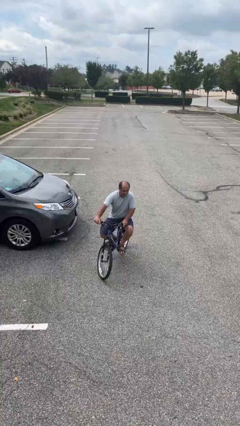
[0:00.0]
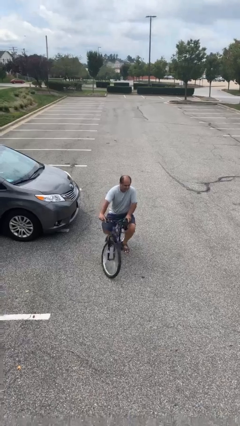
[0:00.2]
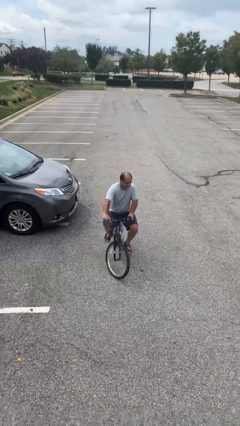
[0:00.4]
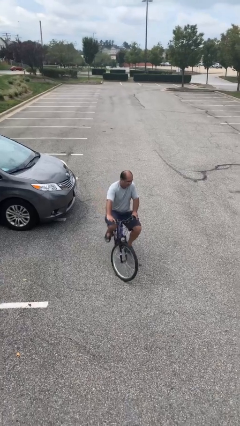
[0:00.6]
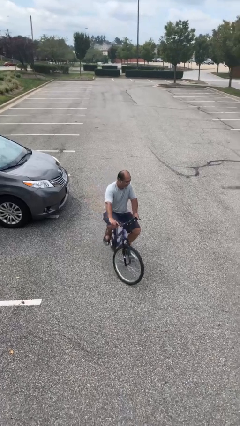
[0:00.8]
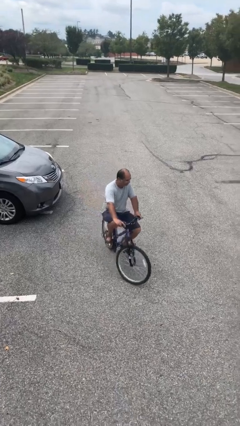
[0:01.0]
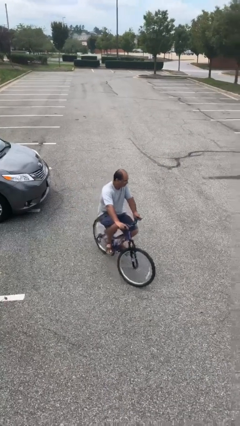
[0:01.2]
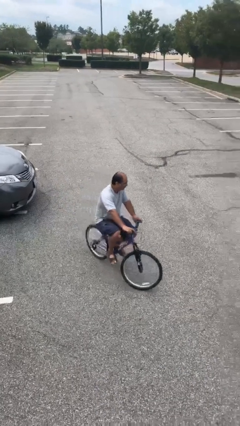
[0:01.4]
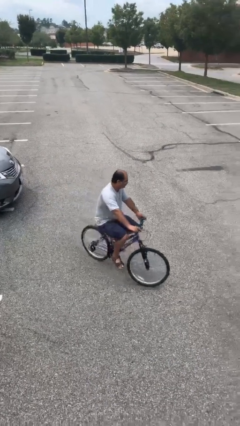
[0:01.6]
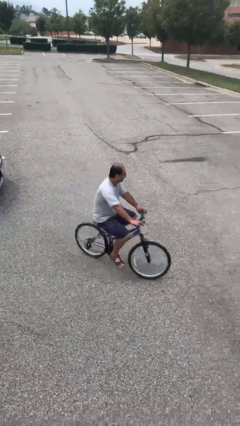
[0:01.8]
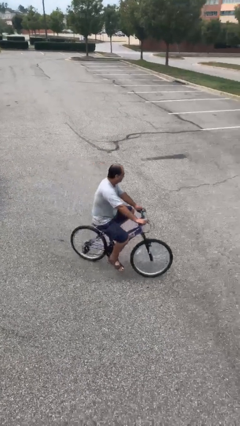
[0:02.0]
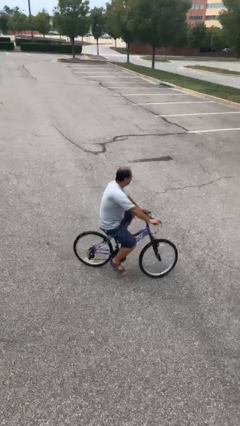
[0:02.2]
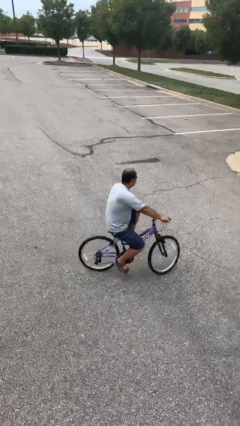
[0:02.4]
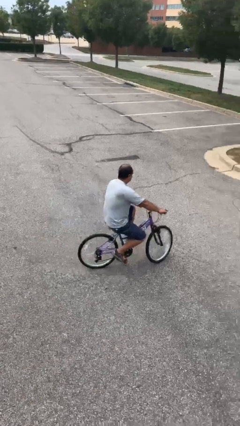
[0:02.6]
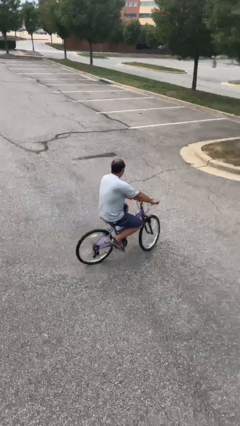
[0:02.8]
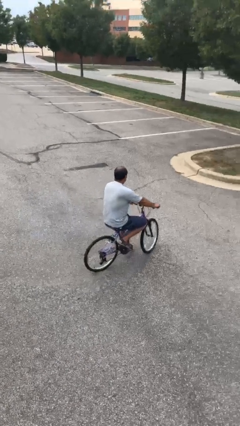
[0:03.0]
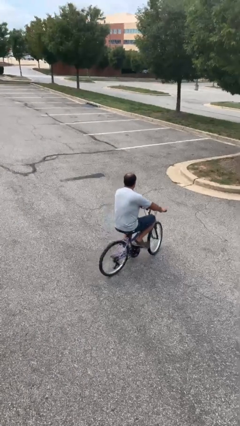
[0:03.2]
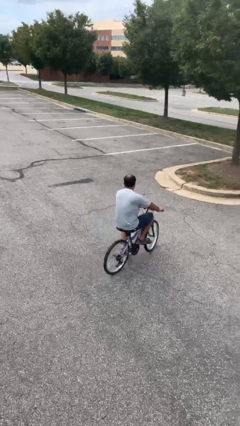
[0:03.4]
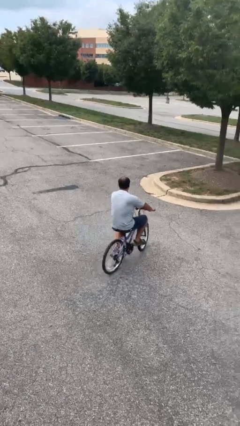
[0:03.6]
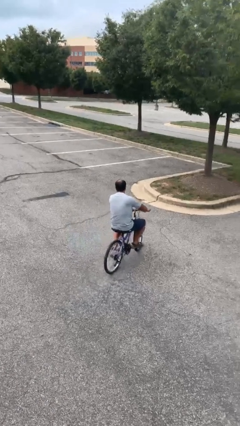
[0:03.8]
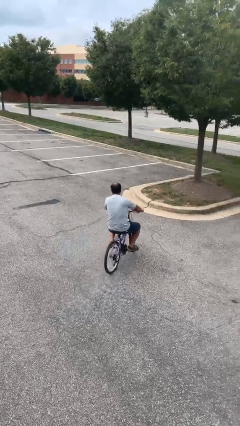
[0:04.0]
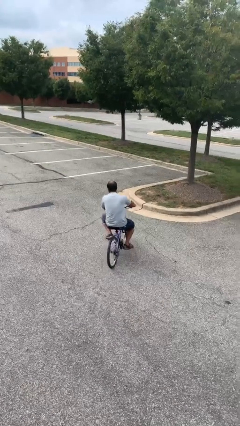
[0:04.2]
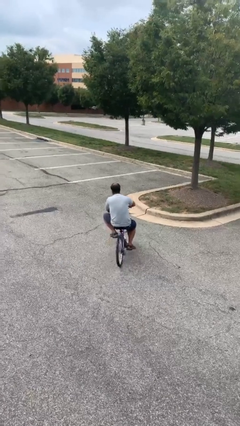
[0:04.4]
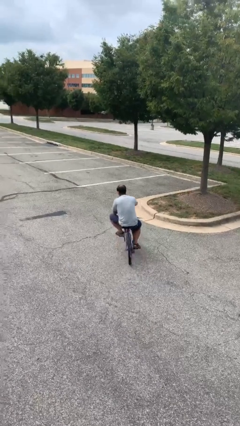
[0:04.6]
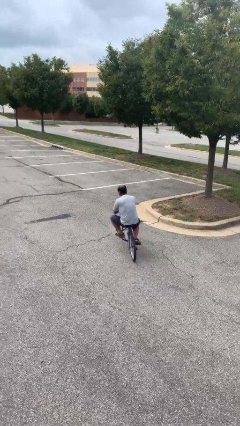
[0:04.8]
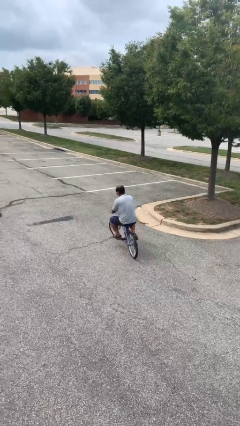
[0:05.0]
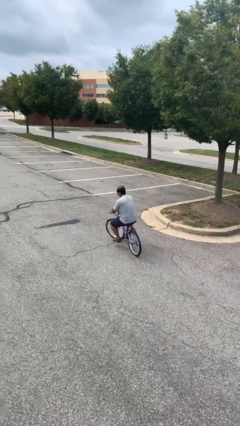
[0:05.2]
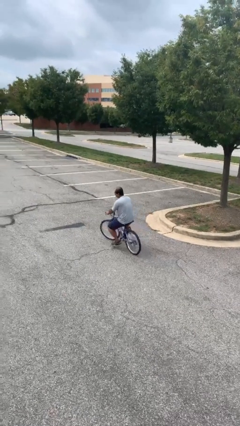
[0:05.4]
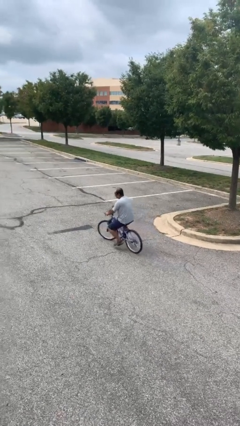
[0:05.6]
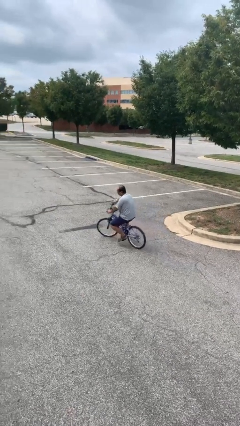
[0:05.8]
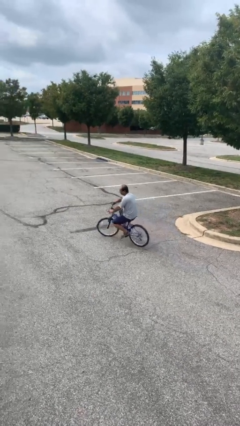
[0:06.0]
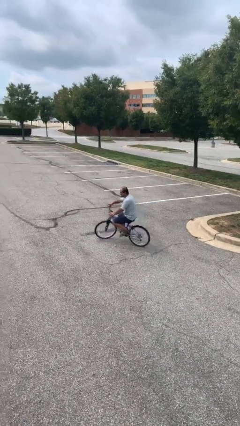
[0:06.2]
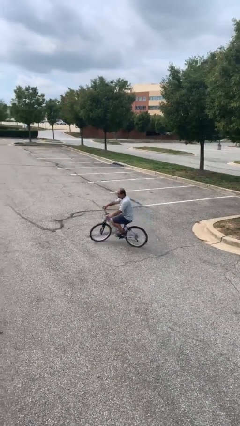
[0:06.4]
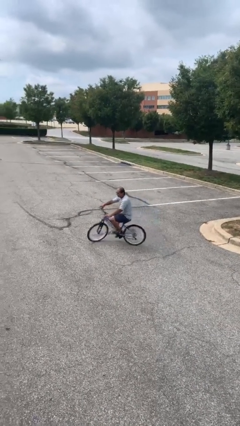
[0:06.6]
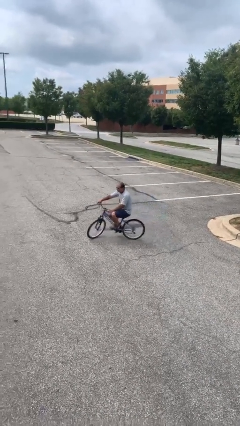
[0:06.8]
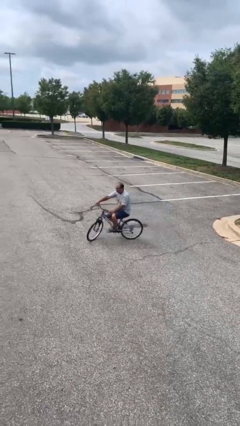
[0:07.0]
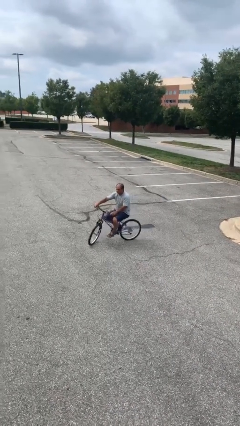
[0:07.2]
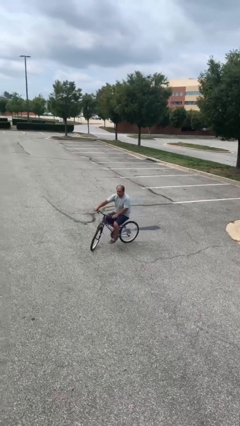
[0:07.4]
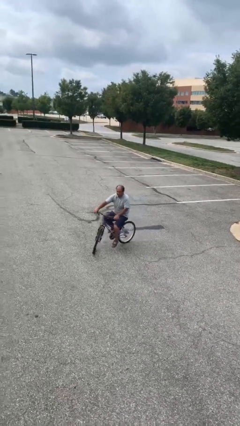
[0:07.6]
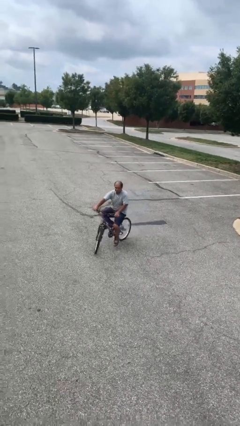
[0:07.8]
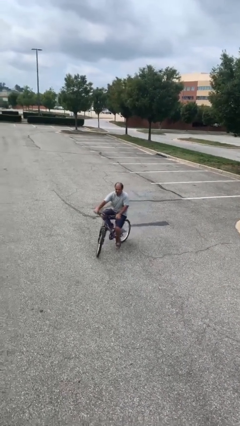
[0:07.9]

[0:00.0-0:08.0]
person rides bicycle

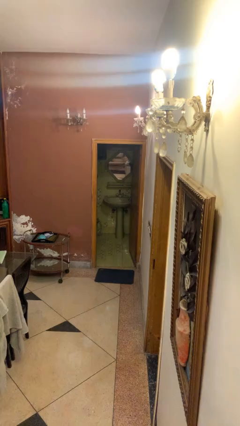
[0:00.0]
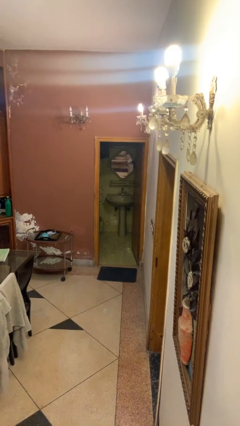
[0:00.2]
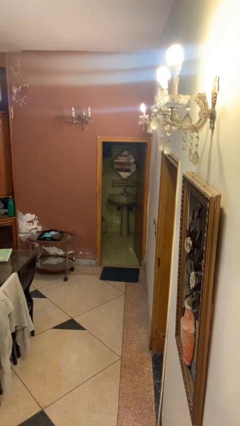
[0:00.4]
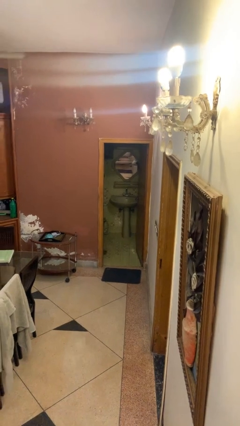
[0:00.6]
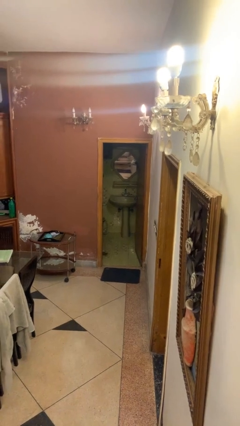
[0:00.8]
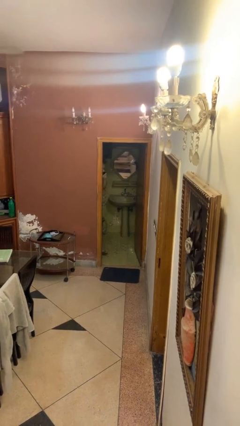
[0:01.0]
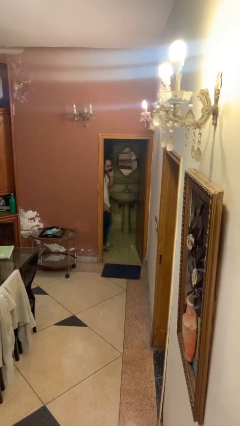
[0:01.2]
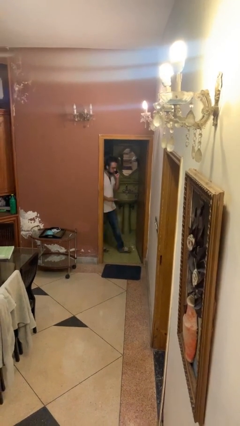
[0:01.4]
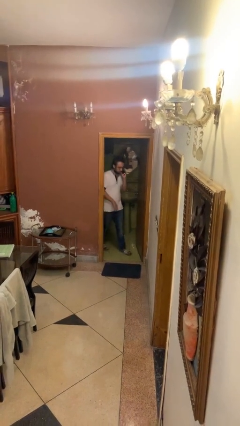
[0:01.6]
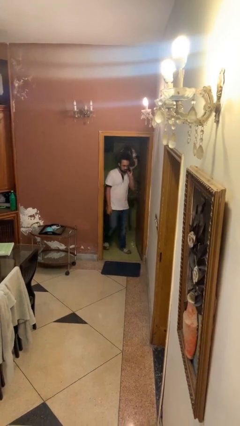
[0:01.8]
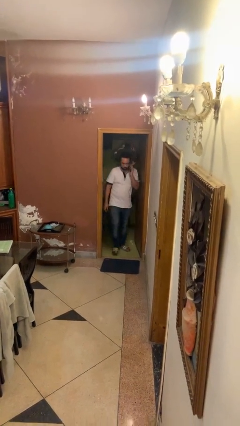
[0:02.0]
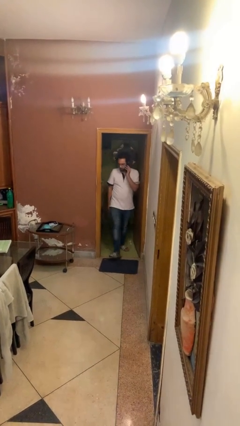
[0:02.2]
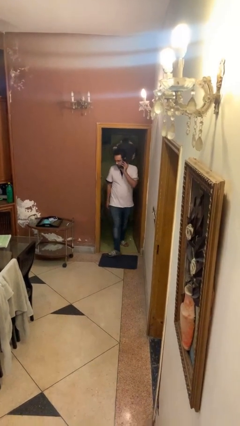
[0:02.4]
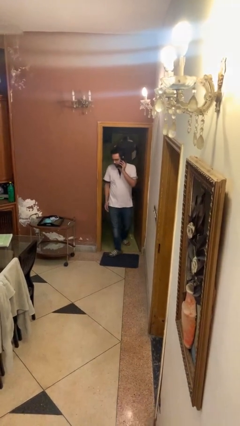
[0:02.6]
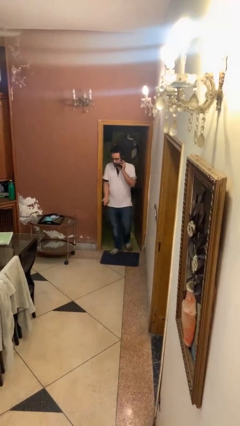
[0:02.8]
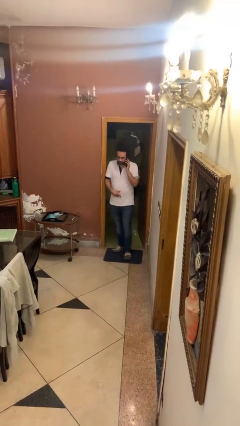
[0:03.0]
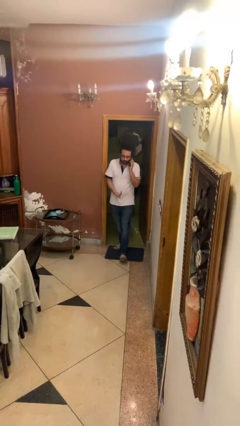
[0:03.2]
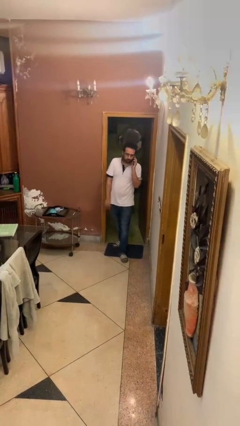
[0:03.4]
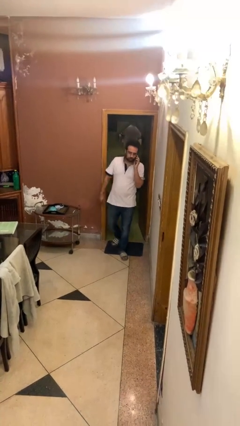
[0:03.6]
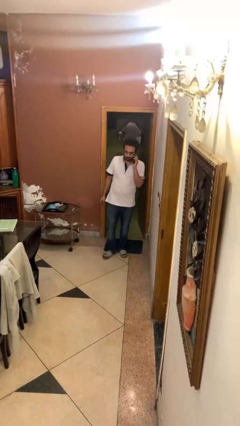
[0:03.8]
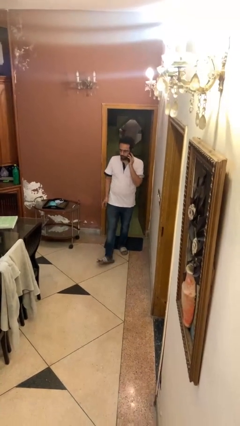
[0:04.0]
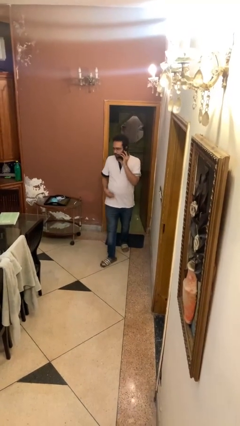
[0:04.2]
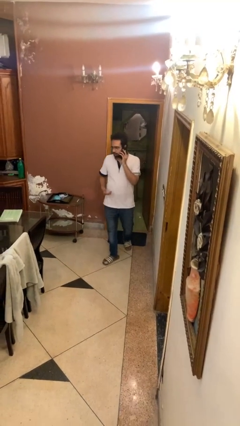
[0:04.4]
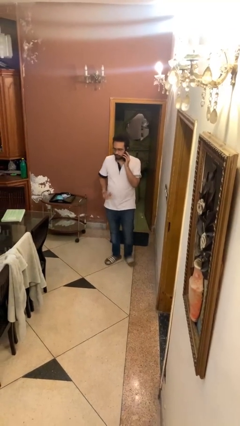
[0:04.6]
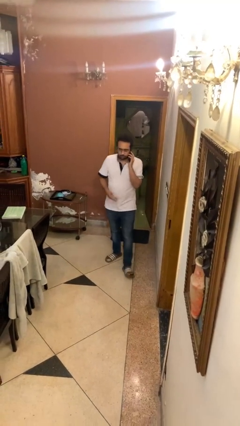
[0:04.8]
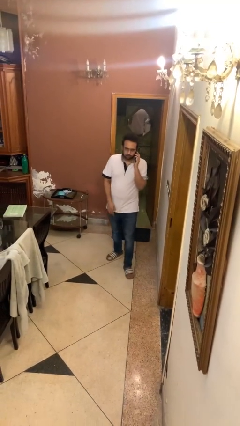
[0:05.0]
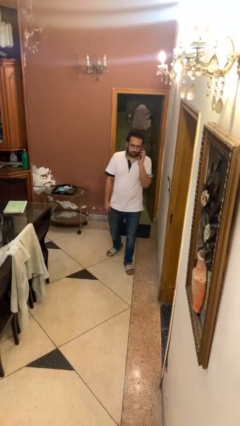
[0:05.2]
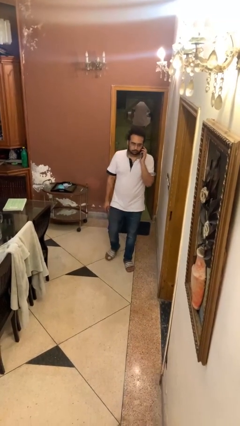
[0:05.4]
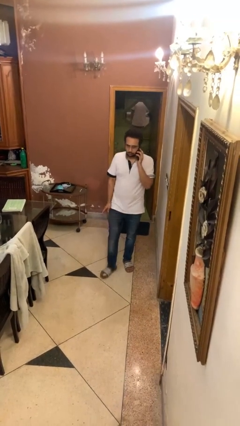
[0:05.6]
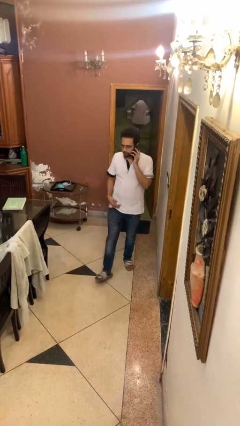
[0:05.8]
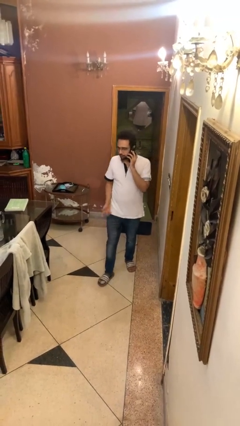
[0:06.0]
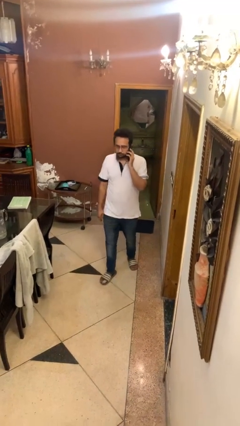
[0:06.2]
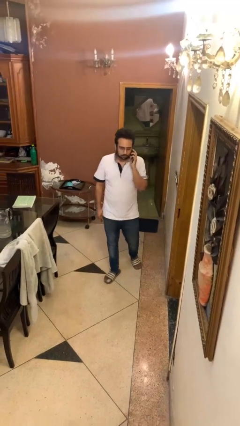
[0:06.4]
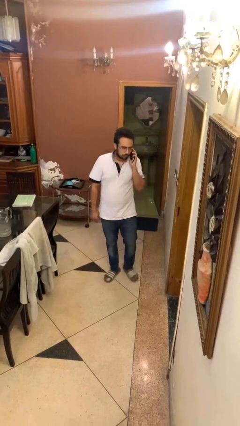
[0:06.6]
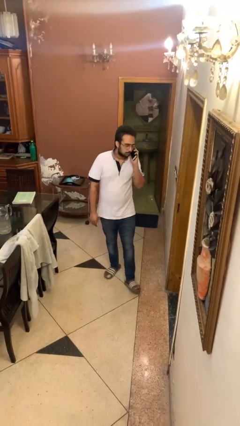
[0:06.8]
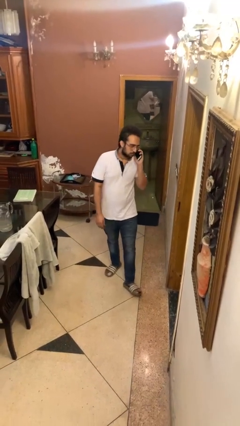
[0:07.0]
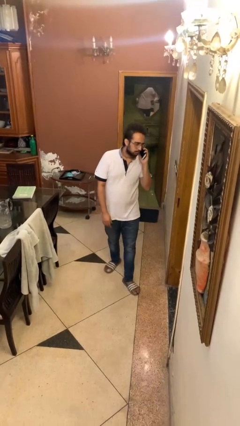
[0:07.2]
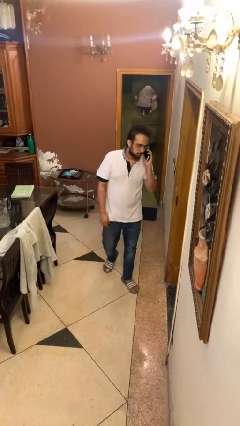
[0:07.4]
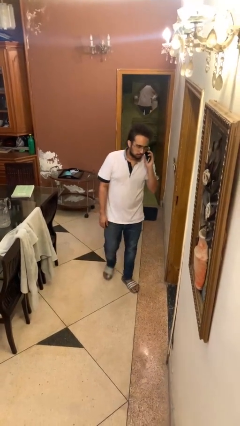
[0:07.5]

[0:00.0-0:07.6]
person enters scene through structure

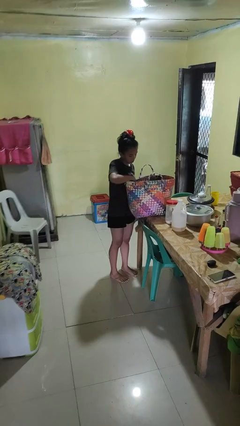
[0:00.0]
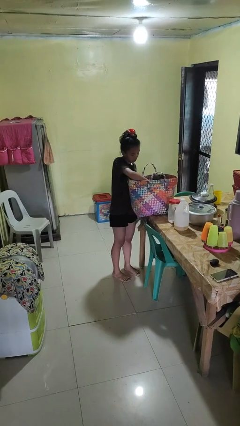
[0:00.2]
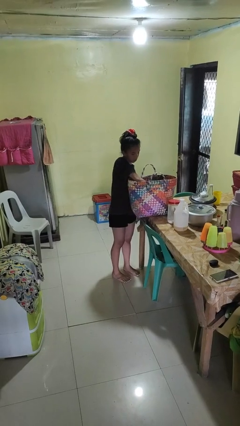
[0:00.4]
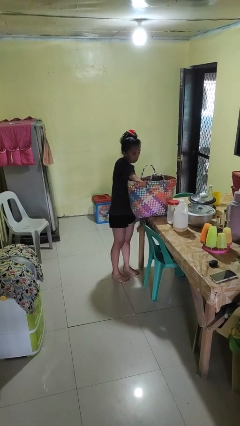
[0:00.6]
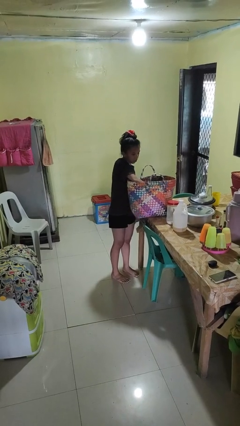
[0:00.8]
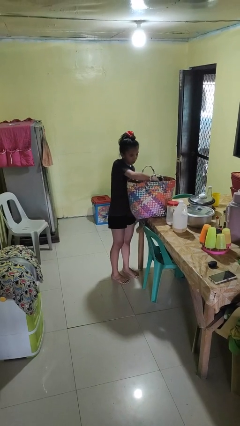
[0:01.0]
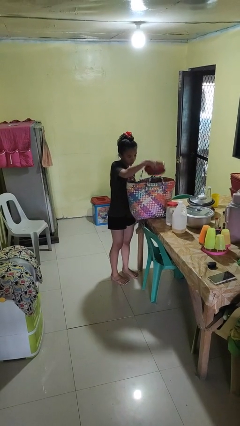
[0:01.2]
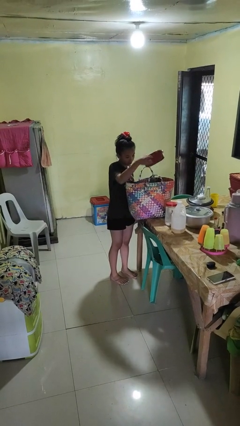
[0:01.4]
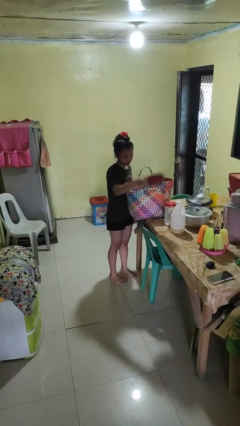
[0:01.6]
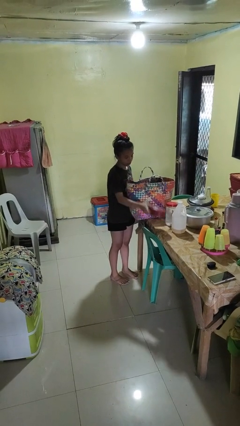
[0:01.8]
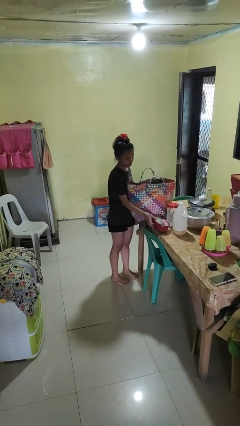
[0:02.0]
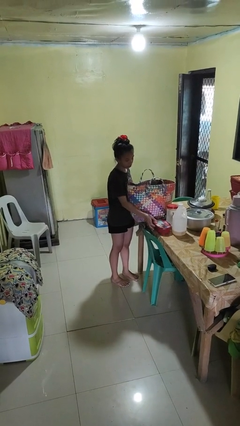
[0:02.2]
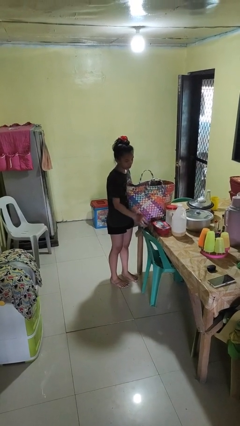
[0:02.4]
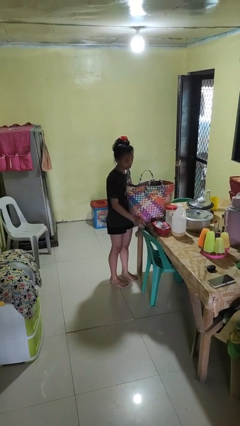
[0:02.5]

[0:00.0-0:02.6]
person takes object from basket
